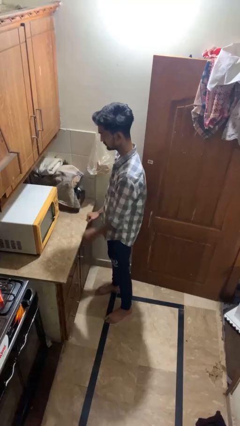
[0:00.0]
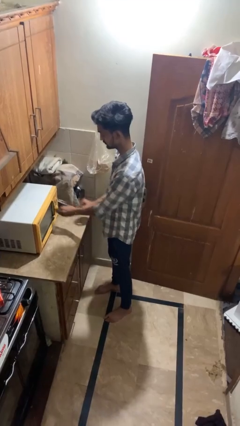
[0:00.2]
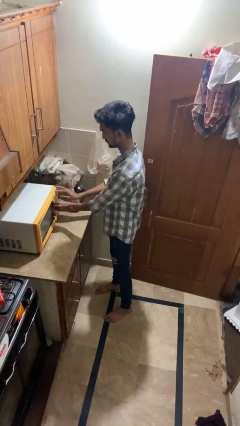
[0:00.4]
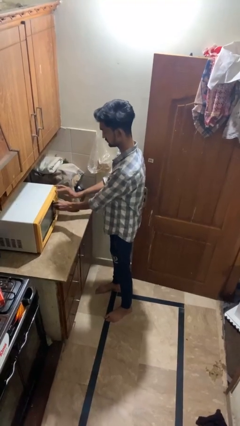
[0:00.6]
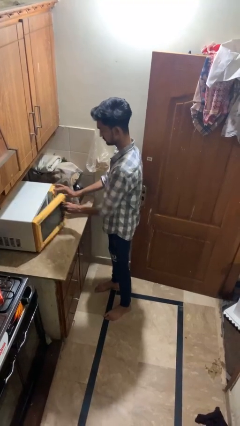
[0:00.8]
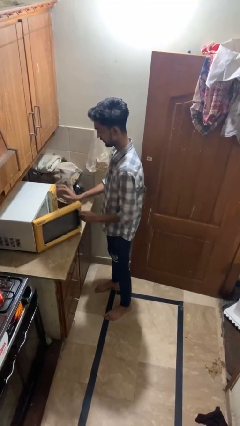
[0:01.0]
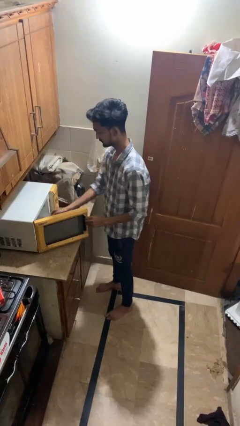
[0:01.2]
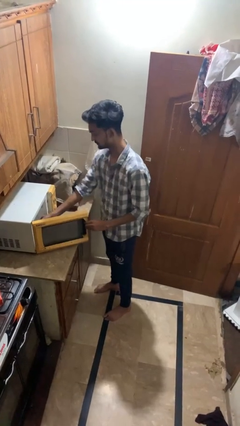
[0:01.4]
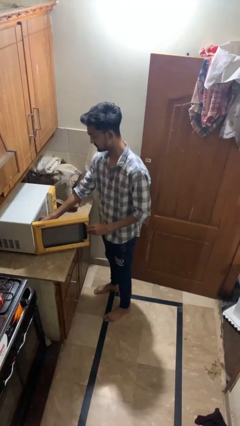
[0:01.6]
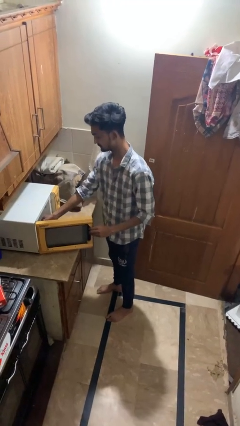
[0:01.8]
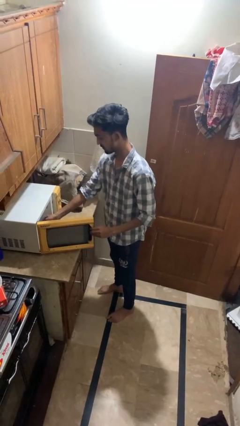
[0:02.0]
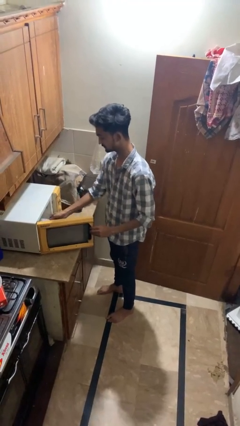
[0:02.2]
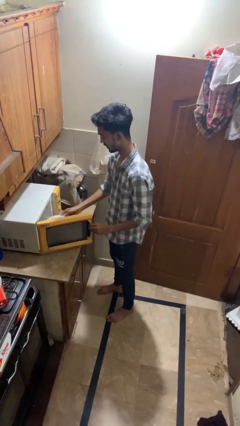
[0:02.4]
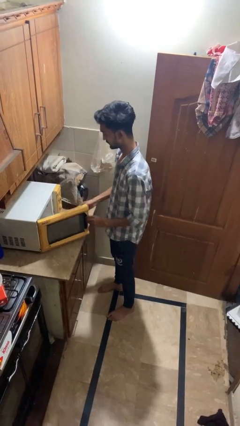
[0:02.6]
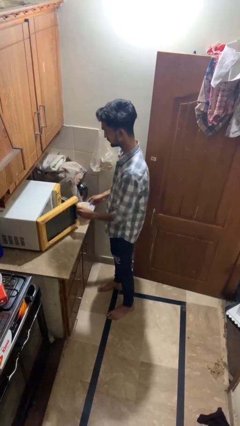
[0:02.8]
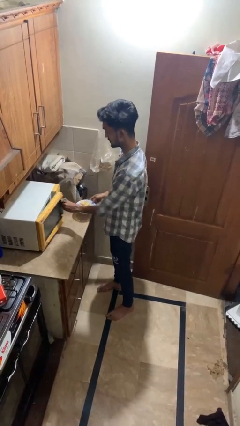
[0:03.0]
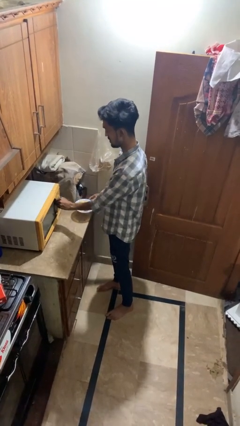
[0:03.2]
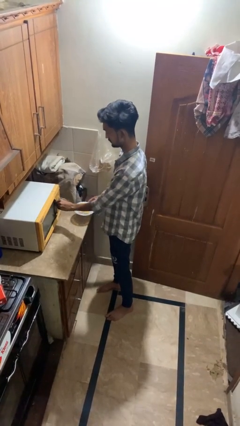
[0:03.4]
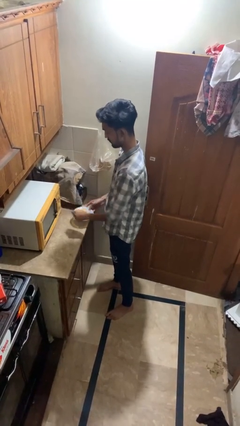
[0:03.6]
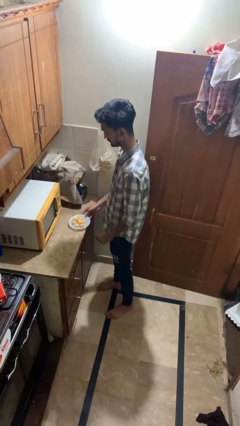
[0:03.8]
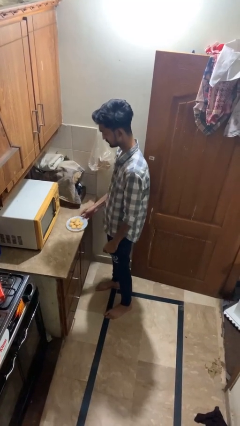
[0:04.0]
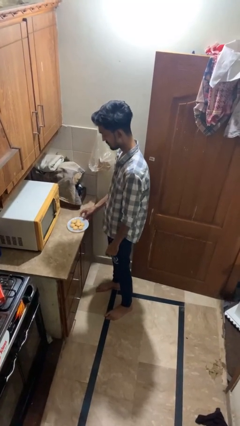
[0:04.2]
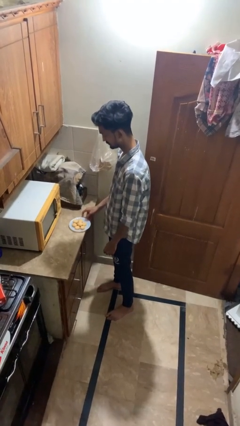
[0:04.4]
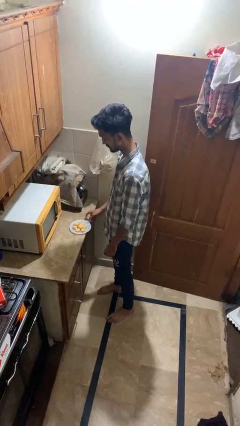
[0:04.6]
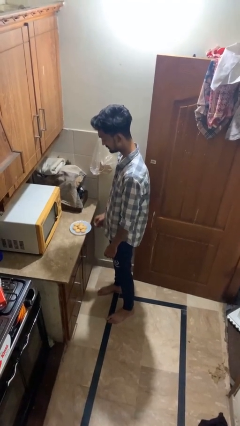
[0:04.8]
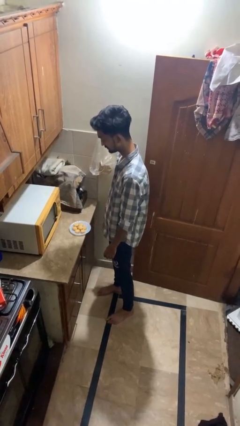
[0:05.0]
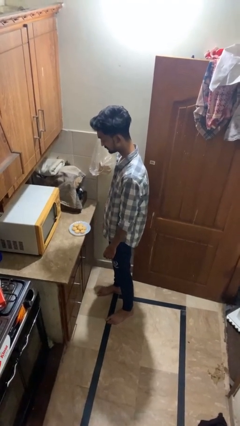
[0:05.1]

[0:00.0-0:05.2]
person takes object from microwave

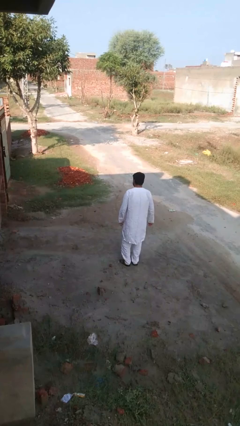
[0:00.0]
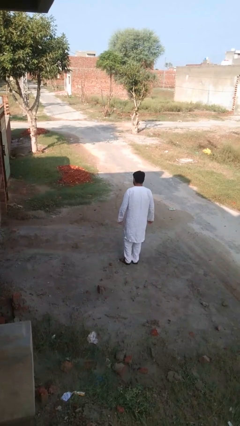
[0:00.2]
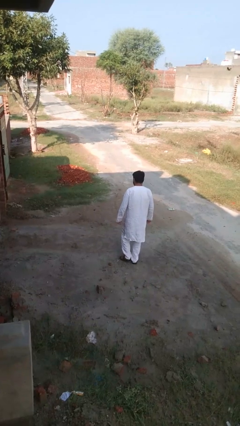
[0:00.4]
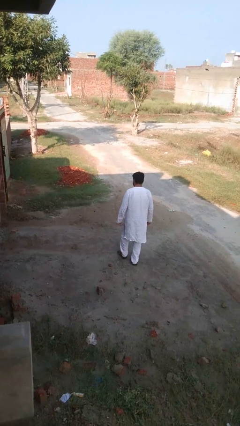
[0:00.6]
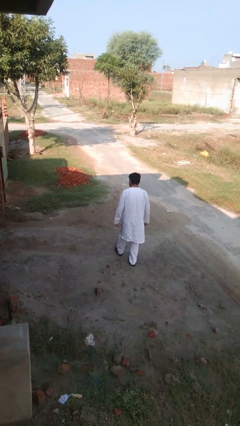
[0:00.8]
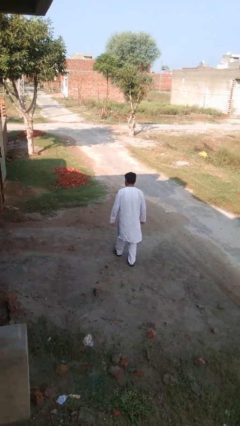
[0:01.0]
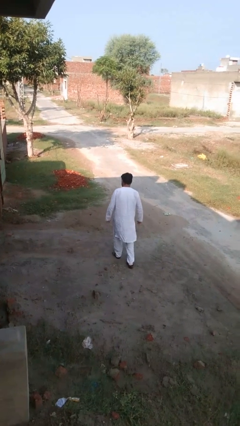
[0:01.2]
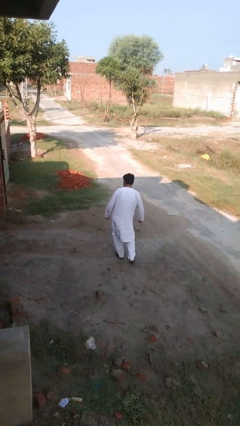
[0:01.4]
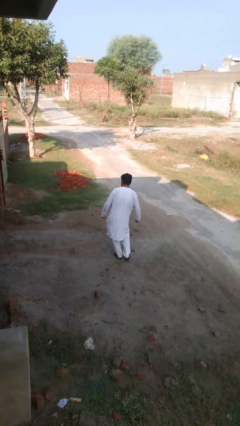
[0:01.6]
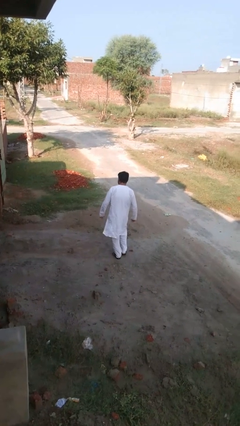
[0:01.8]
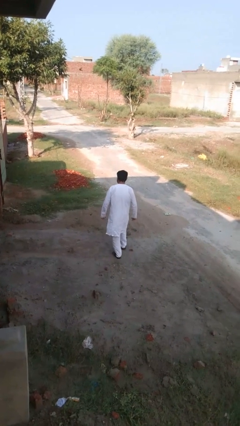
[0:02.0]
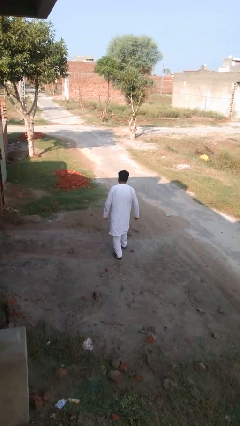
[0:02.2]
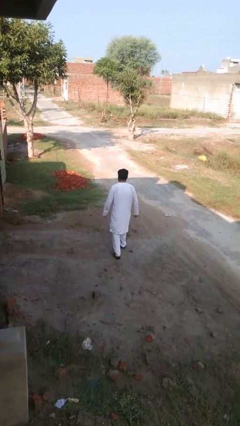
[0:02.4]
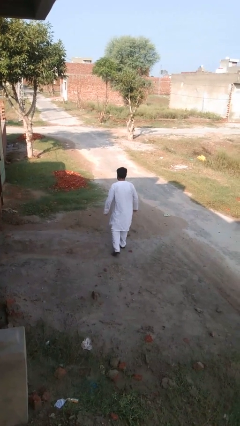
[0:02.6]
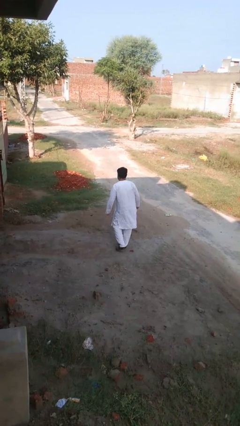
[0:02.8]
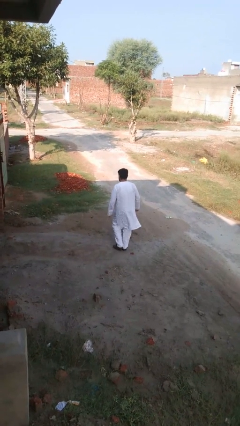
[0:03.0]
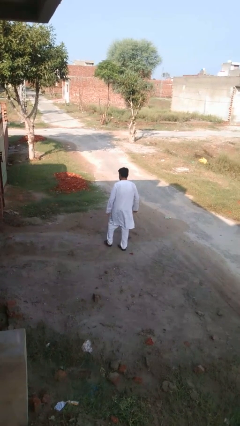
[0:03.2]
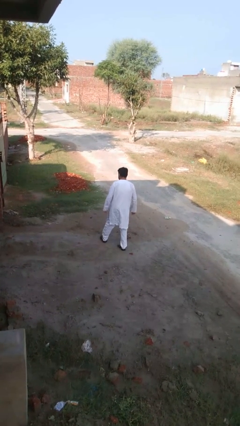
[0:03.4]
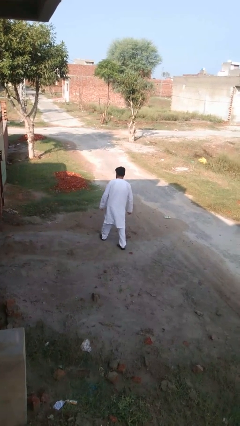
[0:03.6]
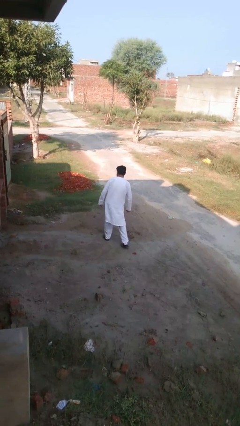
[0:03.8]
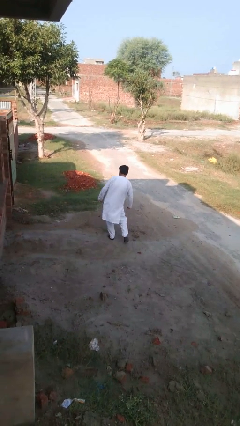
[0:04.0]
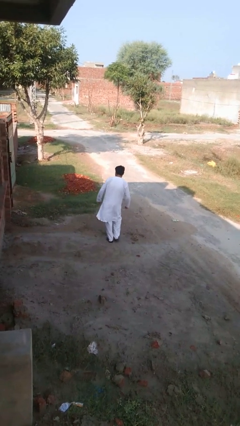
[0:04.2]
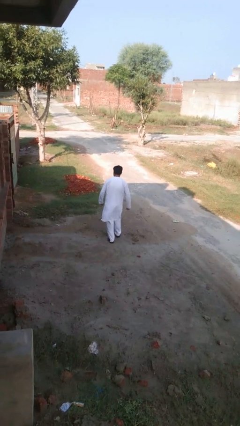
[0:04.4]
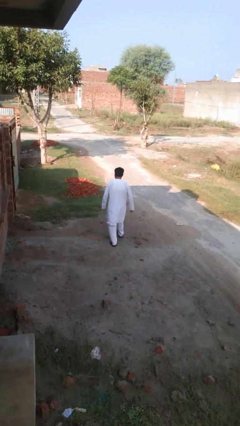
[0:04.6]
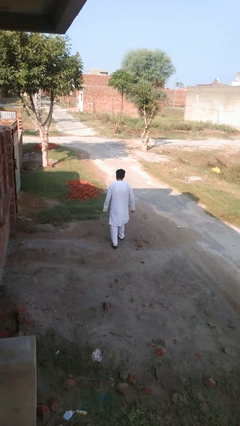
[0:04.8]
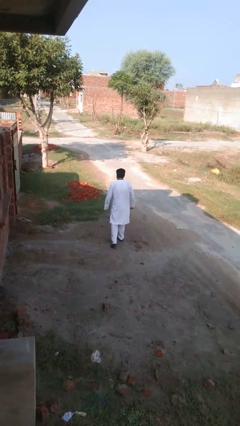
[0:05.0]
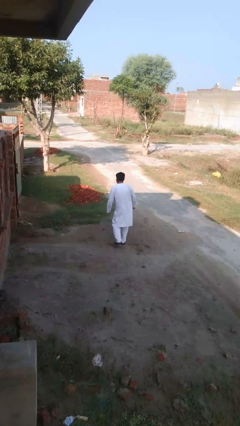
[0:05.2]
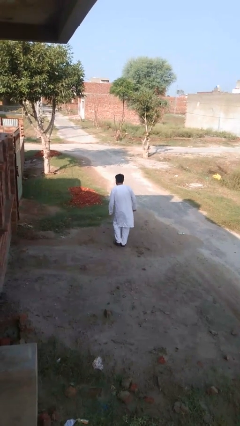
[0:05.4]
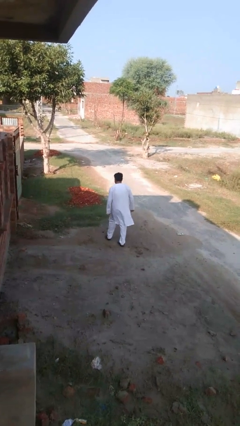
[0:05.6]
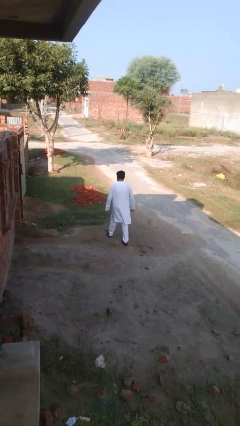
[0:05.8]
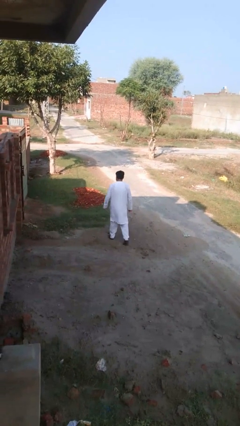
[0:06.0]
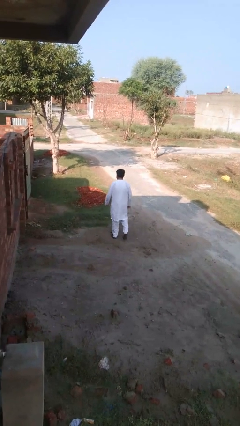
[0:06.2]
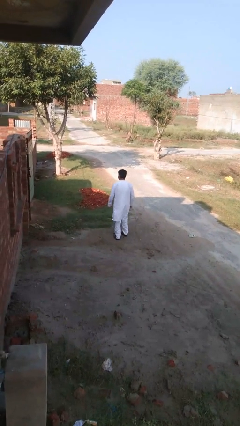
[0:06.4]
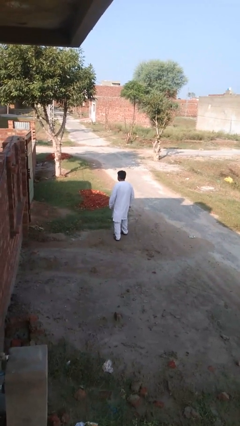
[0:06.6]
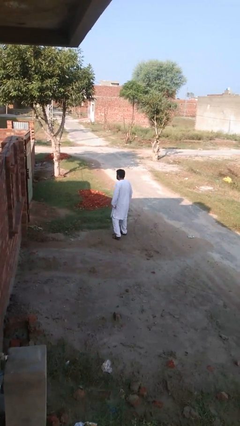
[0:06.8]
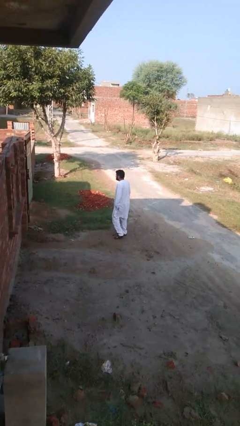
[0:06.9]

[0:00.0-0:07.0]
person walks tiptoe

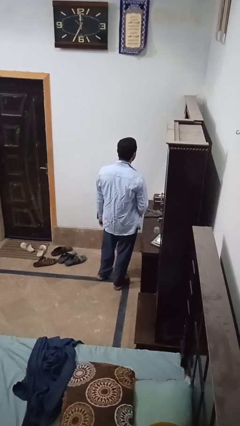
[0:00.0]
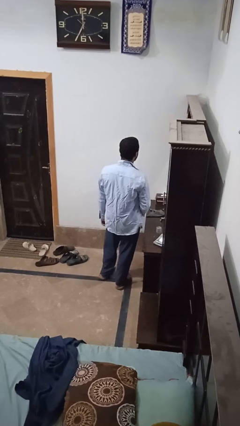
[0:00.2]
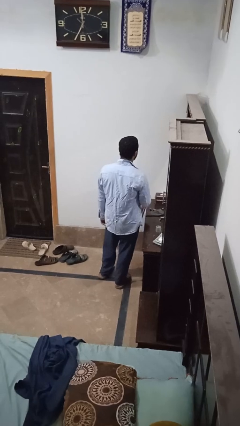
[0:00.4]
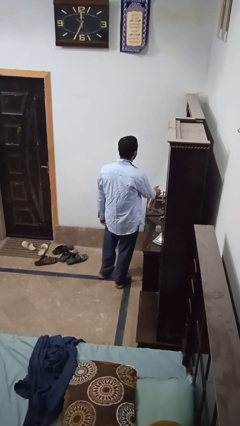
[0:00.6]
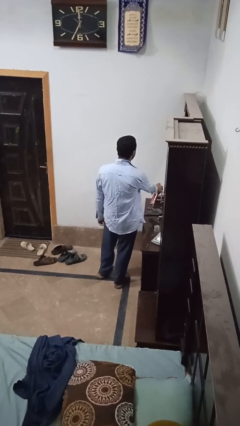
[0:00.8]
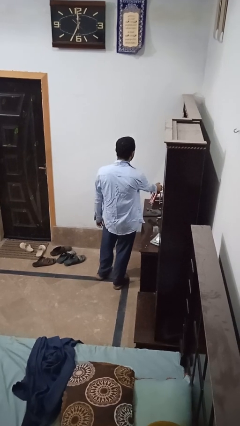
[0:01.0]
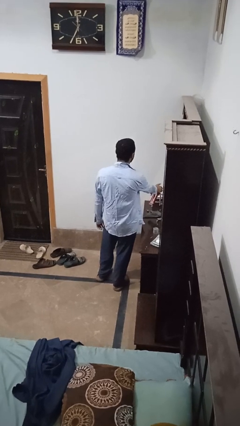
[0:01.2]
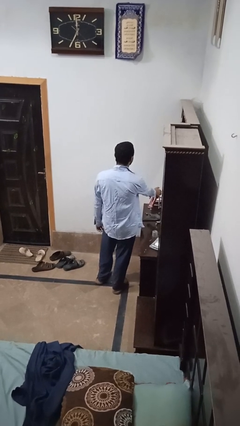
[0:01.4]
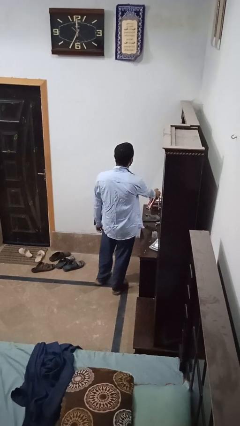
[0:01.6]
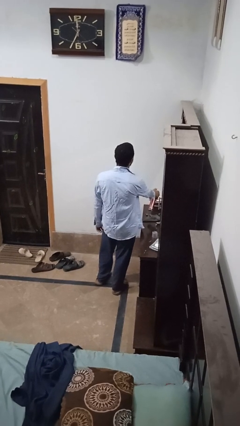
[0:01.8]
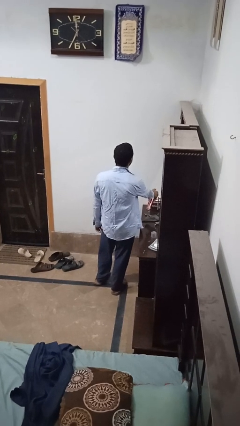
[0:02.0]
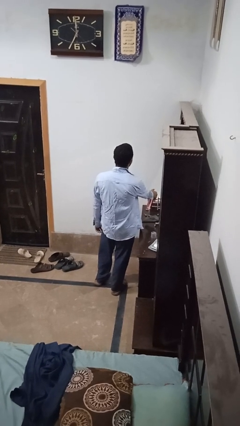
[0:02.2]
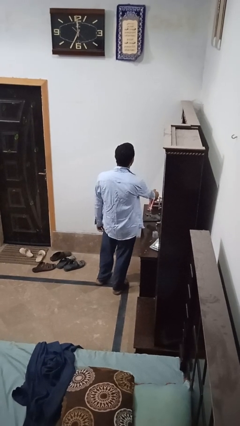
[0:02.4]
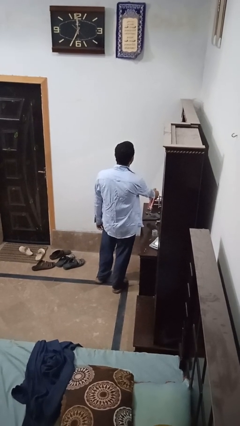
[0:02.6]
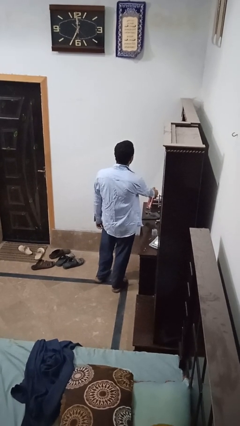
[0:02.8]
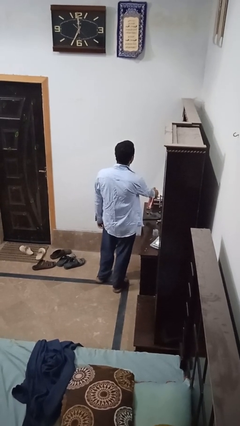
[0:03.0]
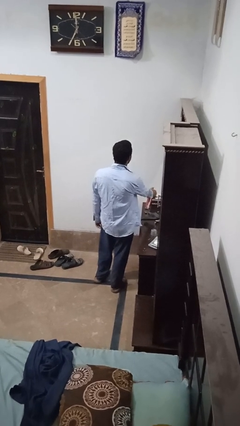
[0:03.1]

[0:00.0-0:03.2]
person sprays from bottle

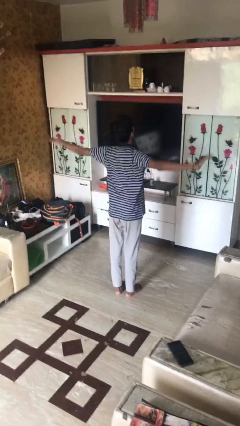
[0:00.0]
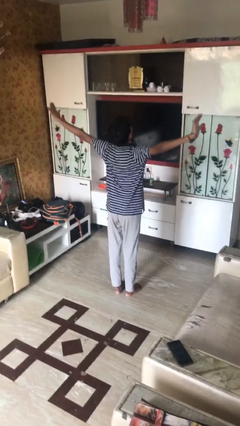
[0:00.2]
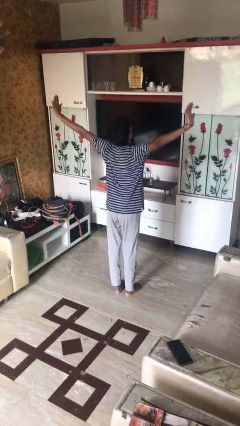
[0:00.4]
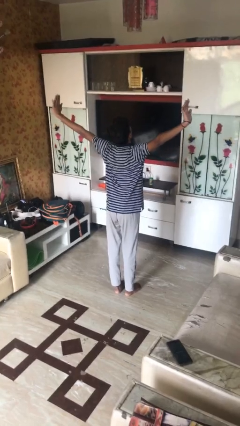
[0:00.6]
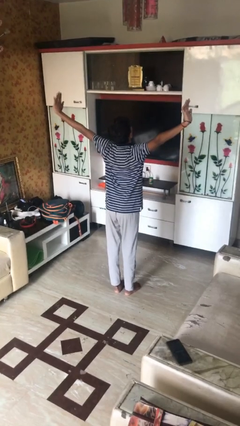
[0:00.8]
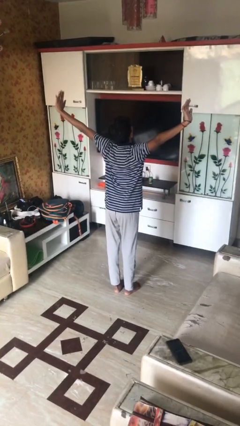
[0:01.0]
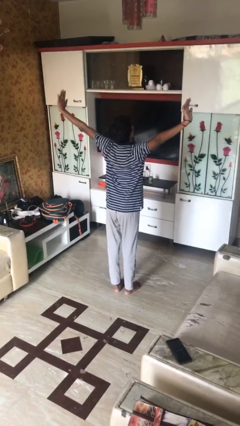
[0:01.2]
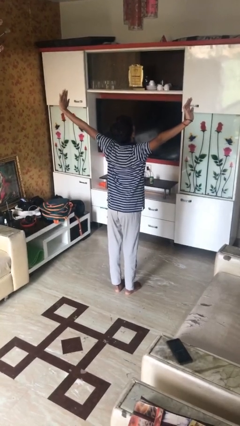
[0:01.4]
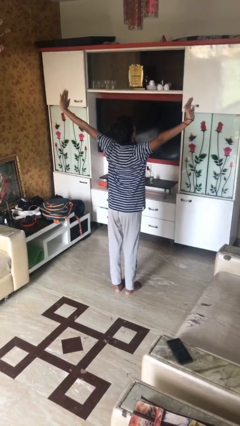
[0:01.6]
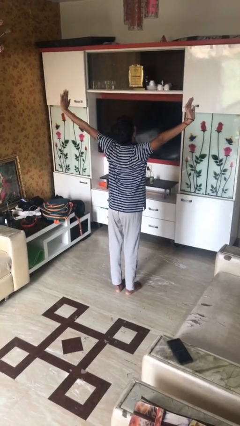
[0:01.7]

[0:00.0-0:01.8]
person stretches arms to side

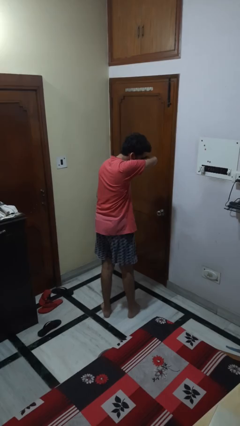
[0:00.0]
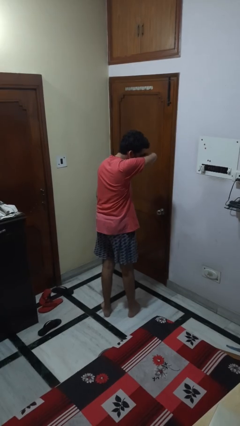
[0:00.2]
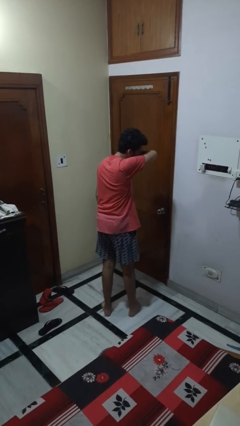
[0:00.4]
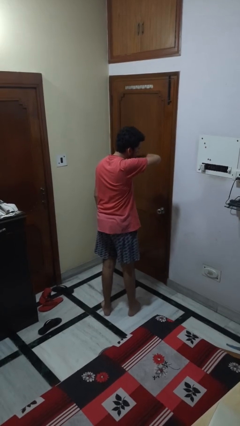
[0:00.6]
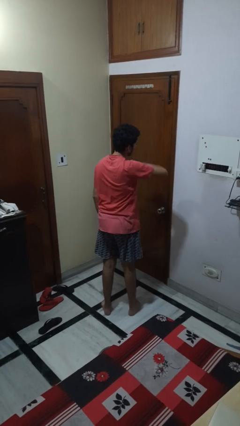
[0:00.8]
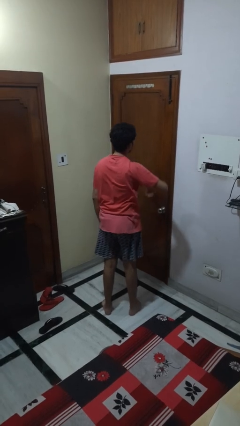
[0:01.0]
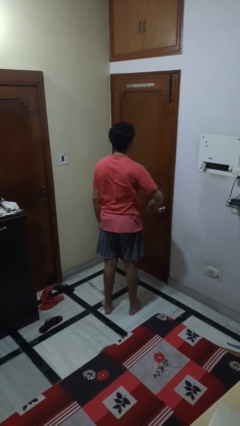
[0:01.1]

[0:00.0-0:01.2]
person sneezes into arm
